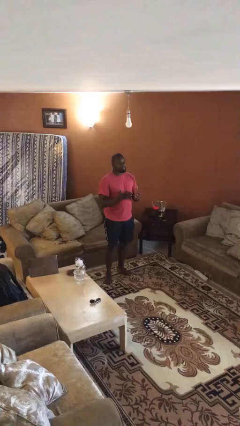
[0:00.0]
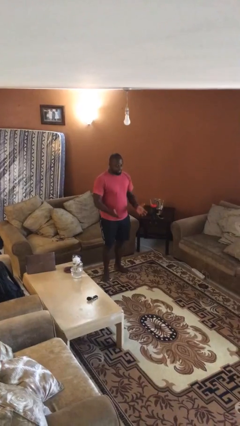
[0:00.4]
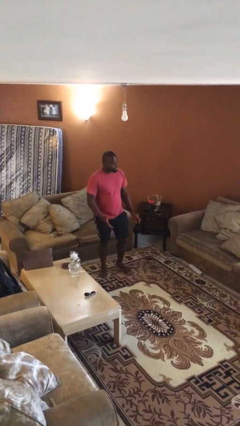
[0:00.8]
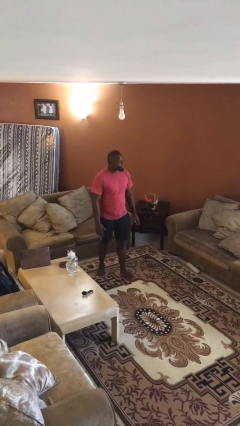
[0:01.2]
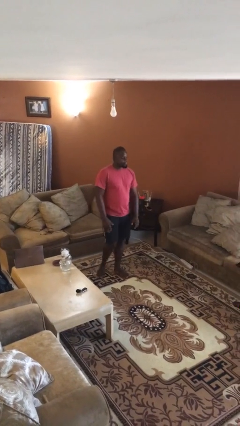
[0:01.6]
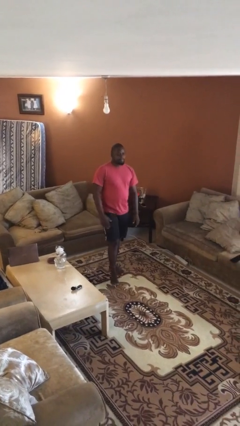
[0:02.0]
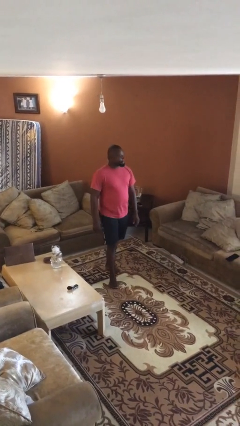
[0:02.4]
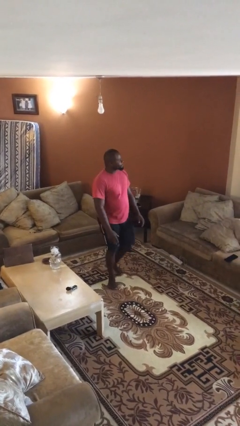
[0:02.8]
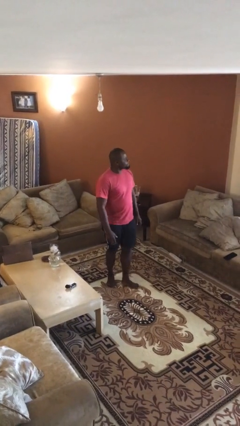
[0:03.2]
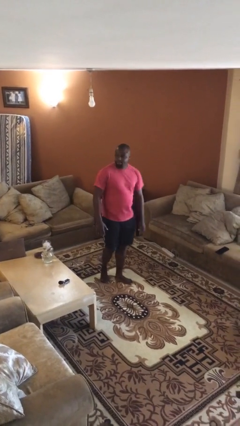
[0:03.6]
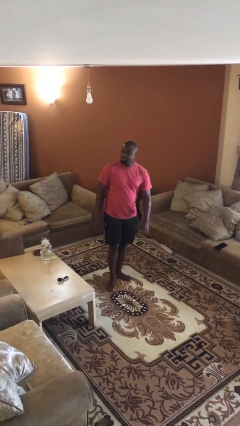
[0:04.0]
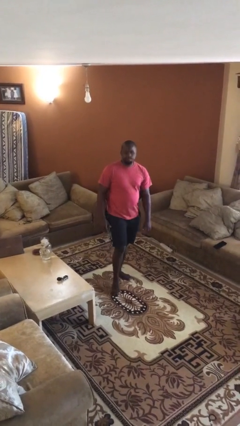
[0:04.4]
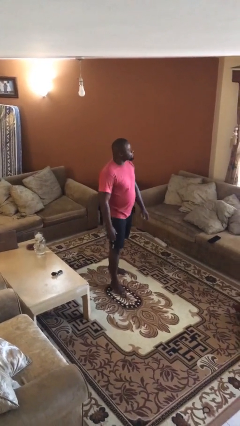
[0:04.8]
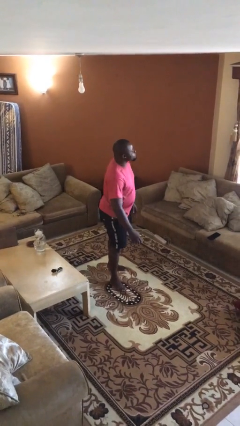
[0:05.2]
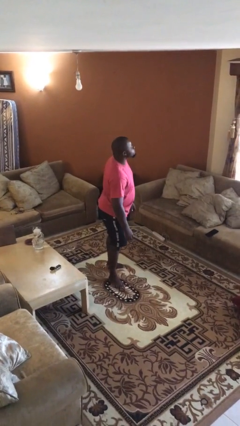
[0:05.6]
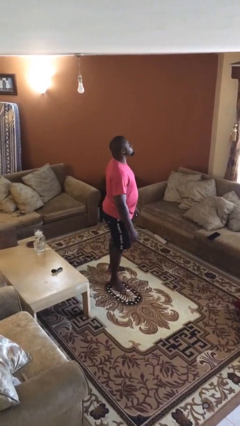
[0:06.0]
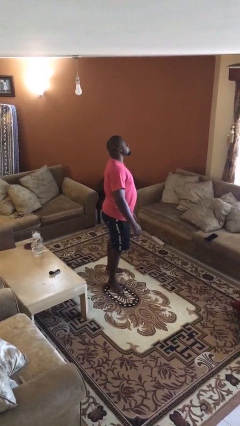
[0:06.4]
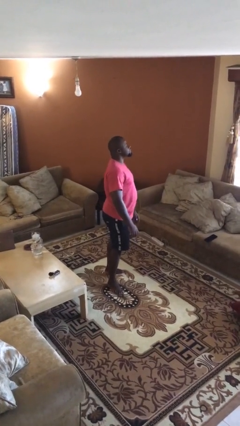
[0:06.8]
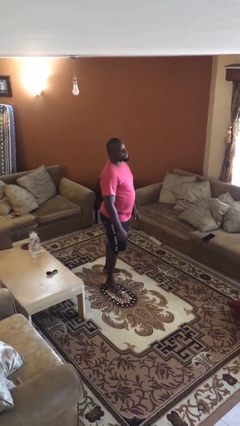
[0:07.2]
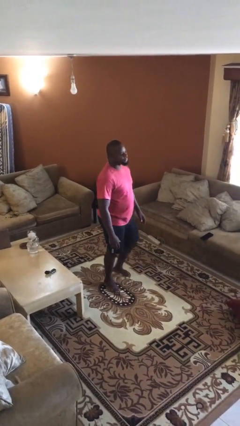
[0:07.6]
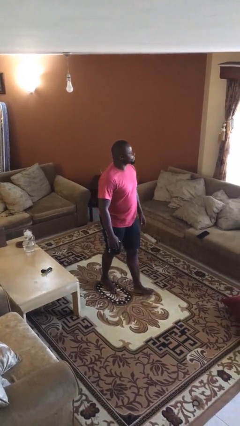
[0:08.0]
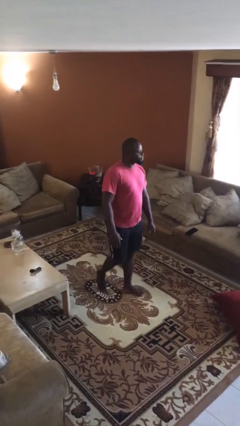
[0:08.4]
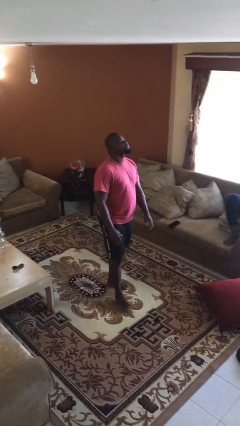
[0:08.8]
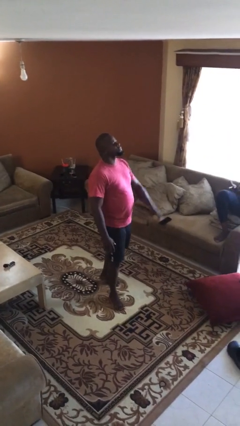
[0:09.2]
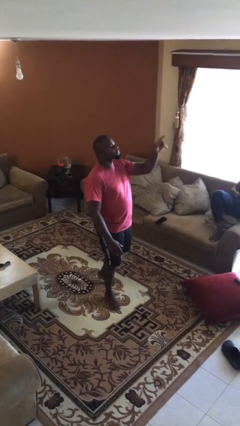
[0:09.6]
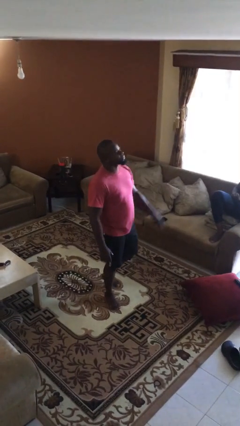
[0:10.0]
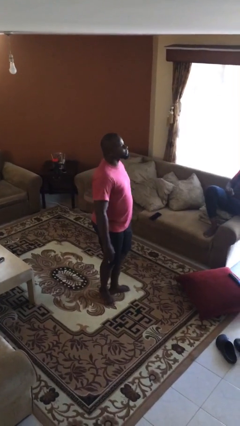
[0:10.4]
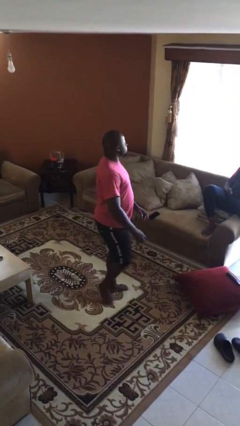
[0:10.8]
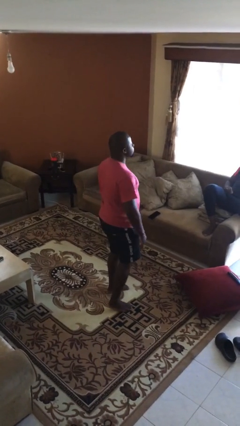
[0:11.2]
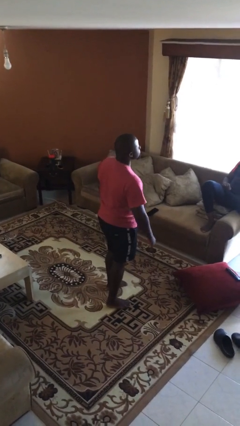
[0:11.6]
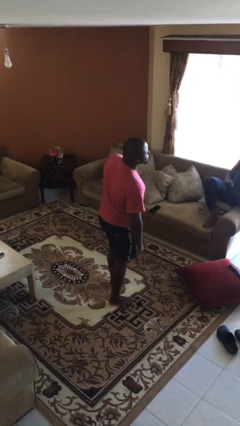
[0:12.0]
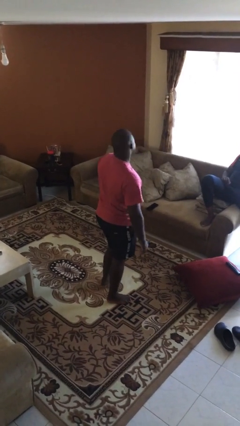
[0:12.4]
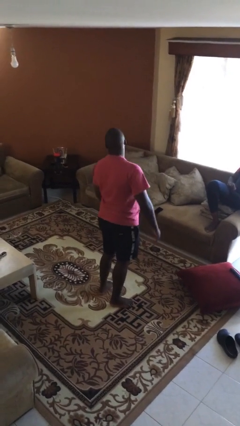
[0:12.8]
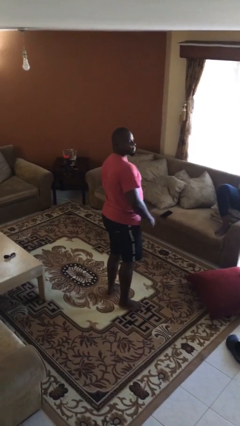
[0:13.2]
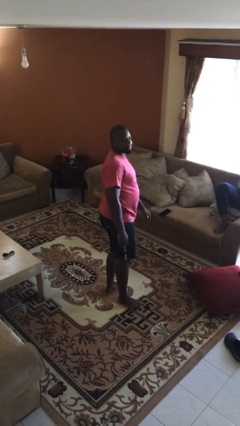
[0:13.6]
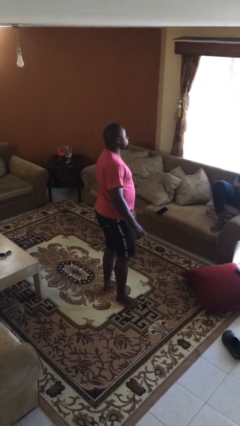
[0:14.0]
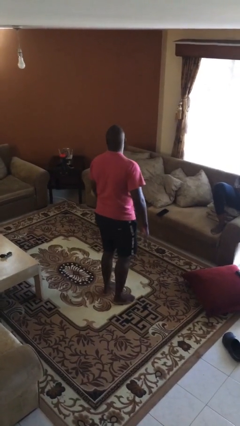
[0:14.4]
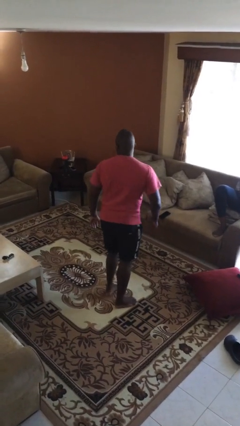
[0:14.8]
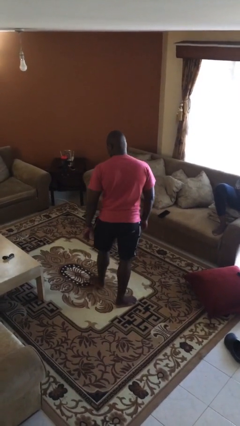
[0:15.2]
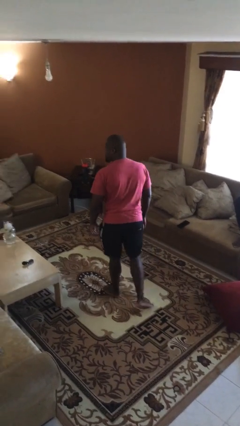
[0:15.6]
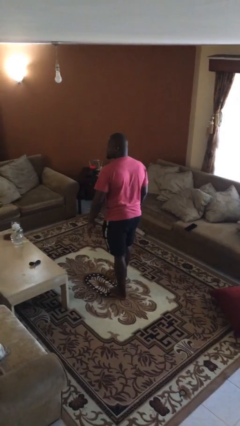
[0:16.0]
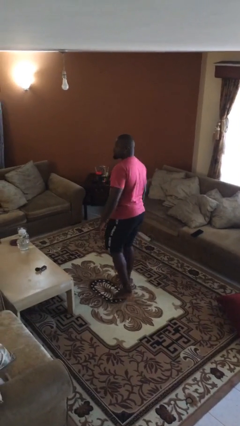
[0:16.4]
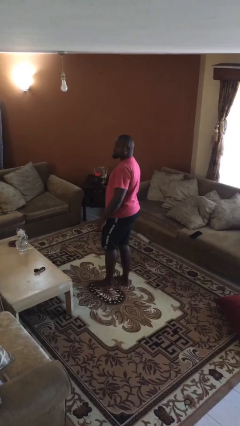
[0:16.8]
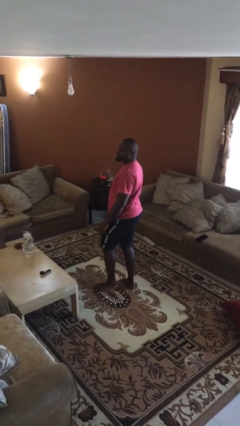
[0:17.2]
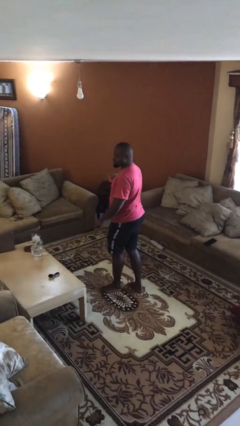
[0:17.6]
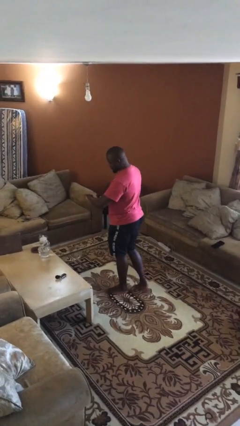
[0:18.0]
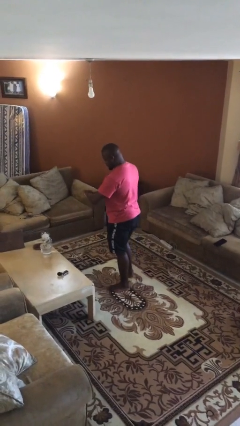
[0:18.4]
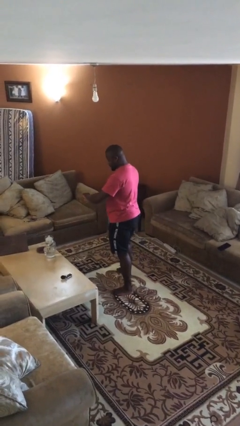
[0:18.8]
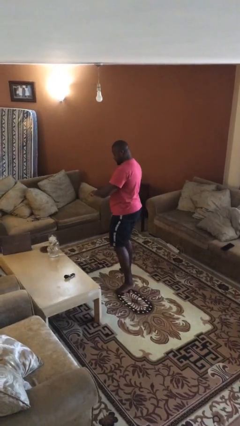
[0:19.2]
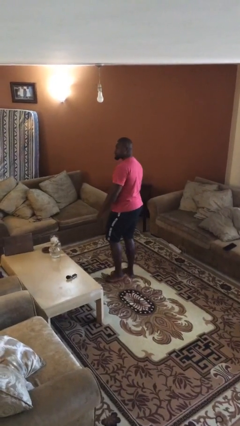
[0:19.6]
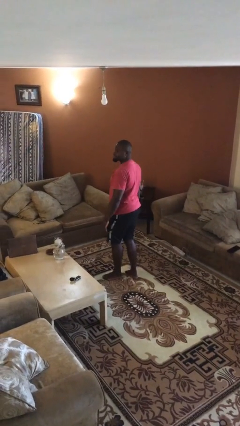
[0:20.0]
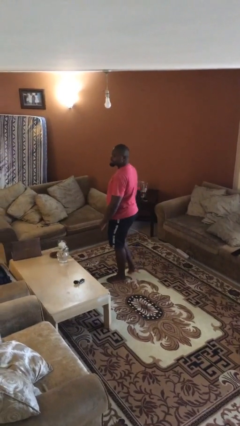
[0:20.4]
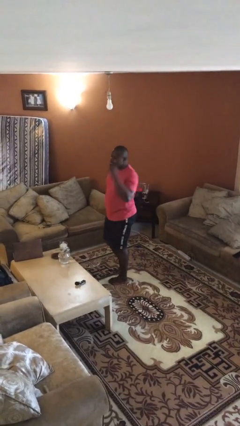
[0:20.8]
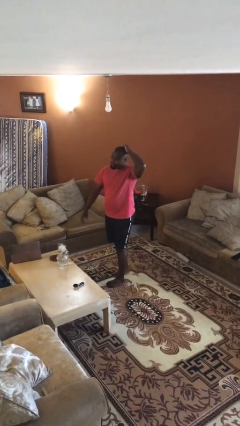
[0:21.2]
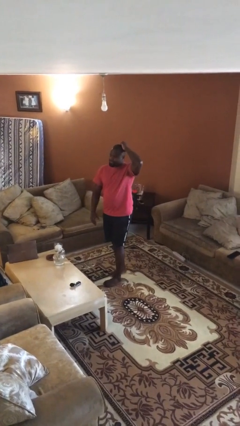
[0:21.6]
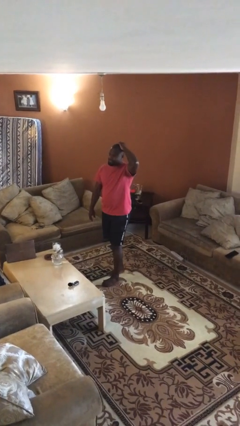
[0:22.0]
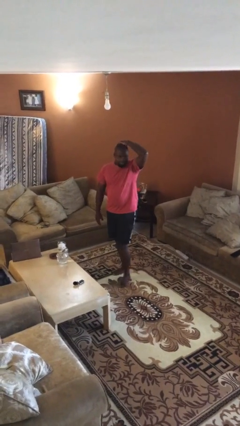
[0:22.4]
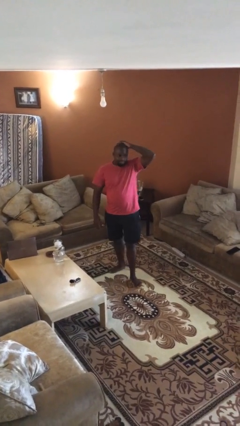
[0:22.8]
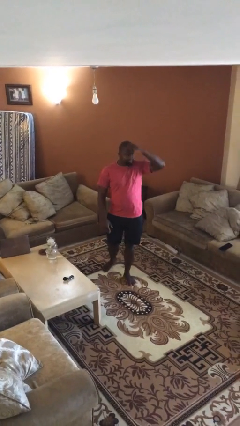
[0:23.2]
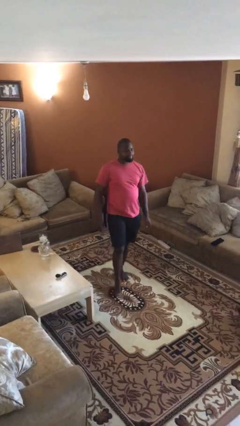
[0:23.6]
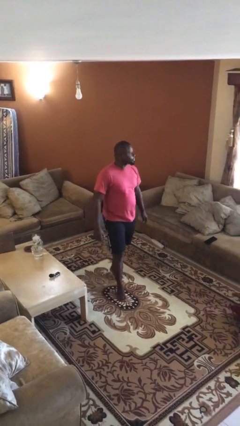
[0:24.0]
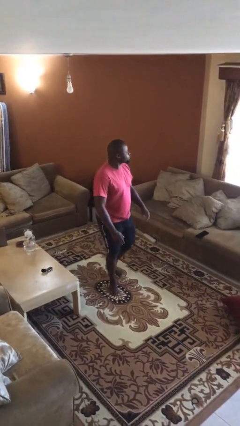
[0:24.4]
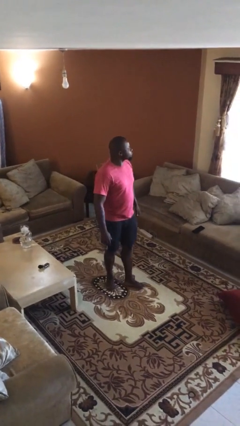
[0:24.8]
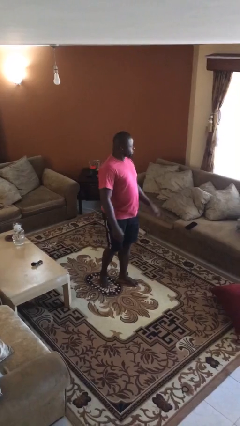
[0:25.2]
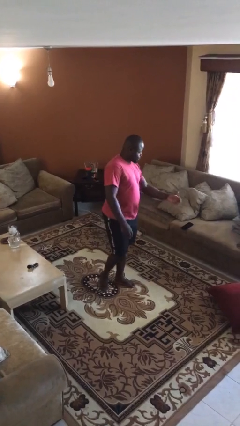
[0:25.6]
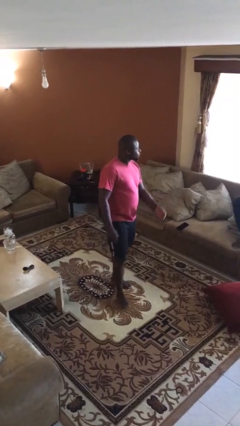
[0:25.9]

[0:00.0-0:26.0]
person walks

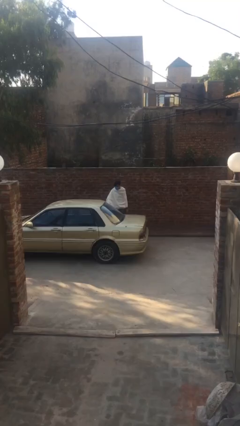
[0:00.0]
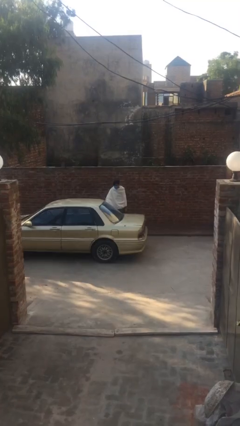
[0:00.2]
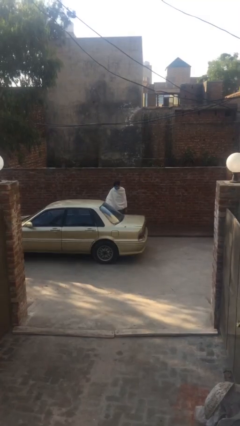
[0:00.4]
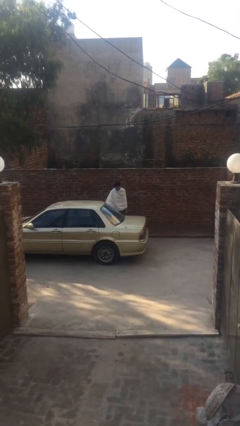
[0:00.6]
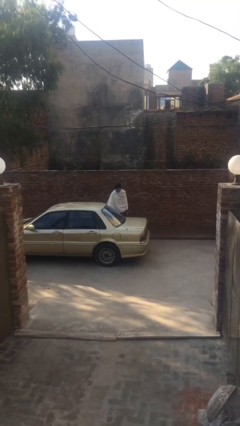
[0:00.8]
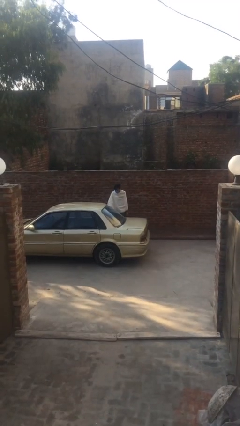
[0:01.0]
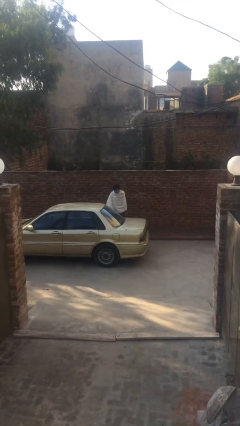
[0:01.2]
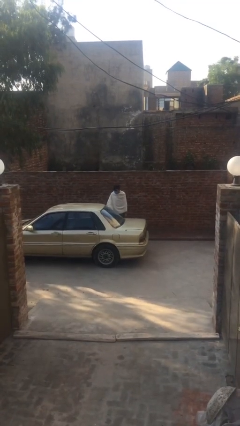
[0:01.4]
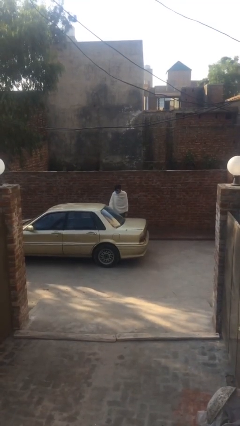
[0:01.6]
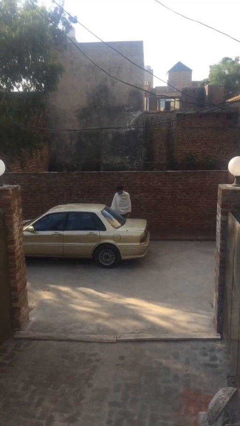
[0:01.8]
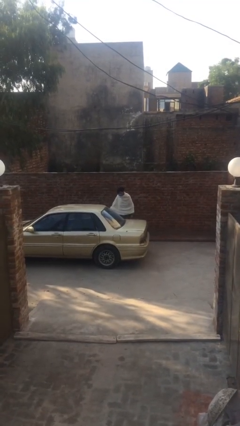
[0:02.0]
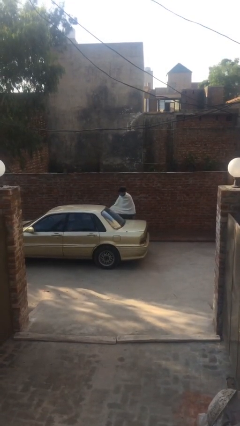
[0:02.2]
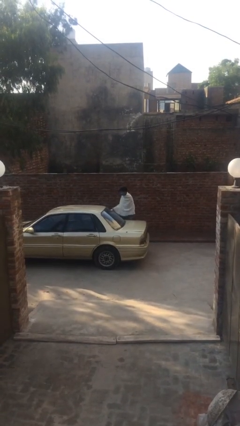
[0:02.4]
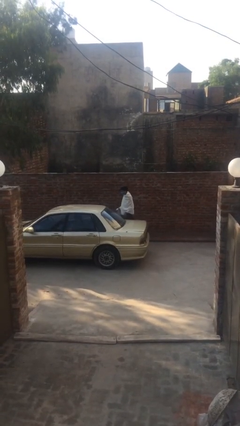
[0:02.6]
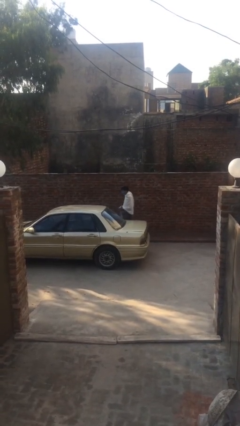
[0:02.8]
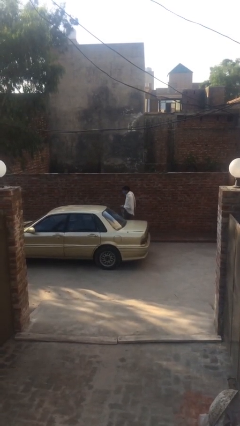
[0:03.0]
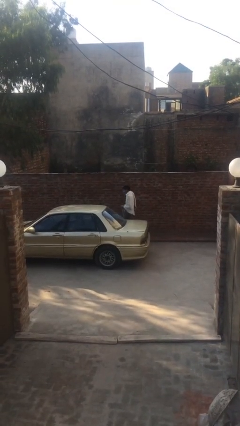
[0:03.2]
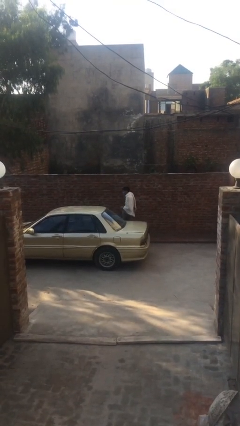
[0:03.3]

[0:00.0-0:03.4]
person opens car door

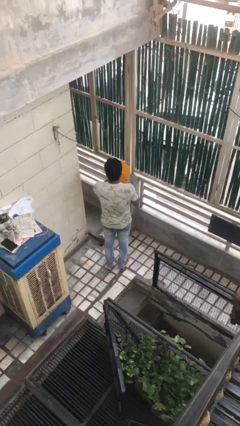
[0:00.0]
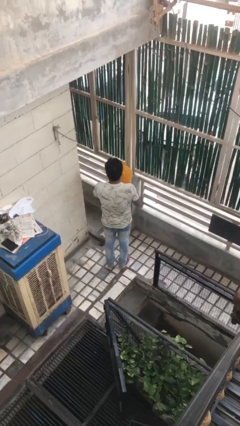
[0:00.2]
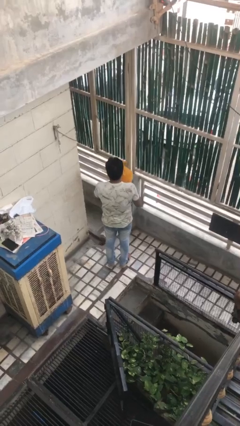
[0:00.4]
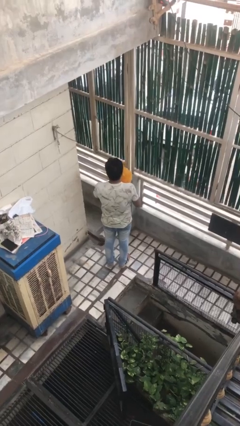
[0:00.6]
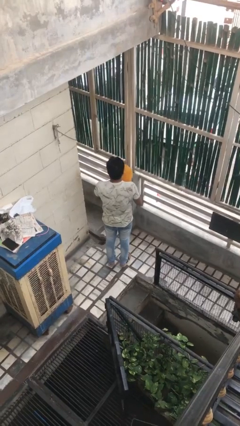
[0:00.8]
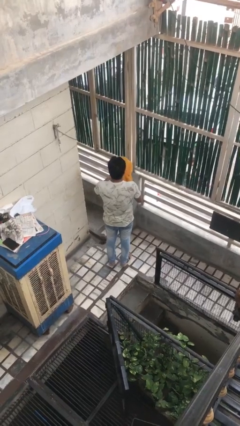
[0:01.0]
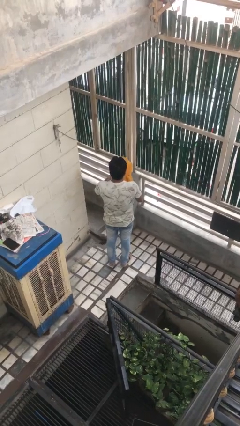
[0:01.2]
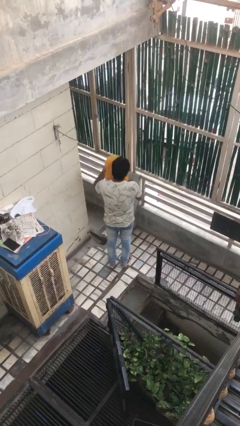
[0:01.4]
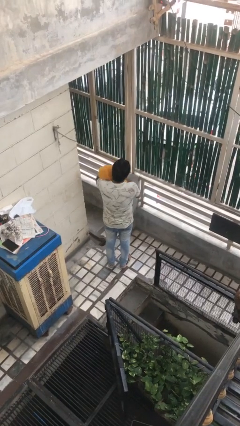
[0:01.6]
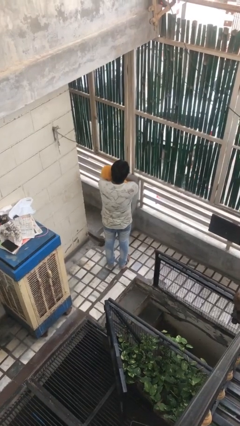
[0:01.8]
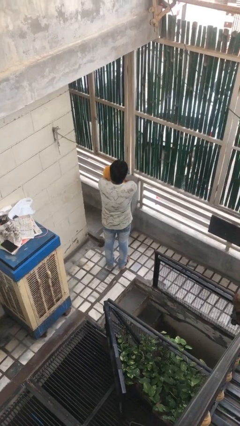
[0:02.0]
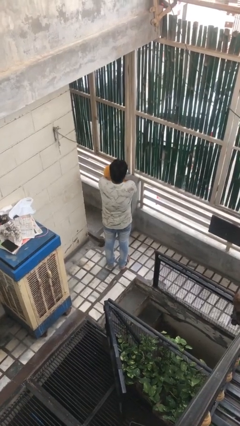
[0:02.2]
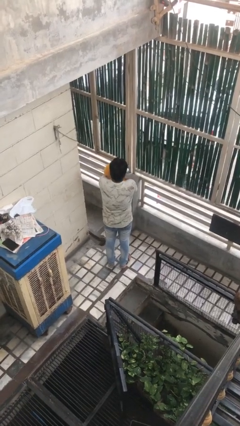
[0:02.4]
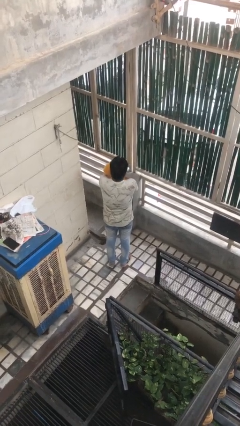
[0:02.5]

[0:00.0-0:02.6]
person hugs stuffed animal
